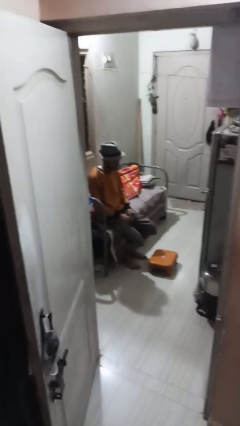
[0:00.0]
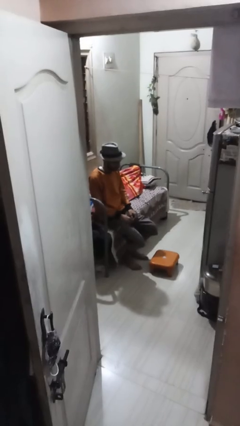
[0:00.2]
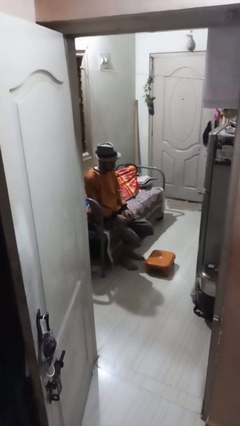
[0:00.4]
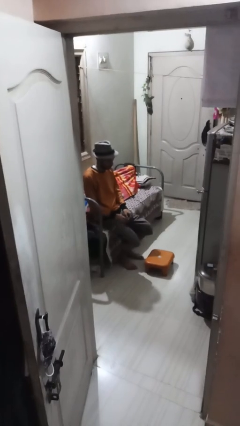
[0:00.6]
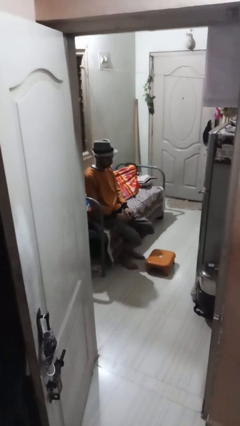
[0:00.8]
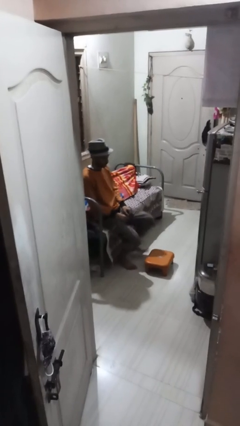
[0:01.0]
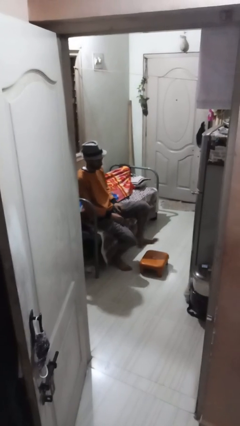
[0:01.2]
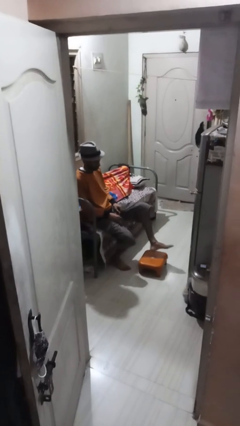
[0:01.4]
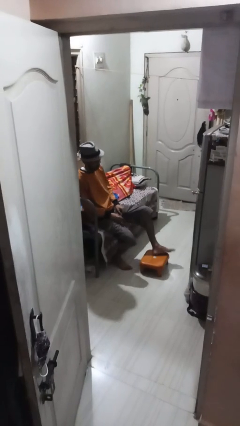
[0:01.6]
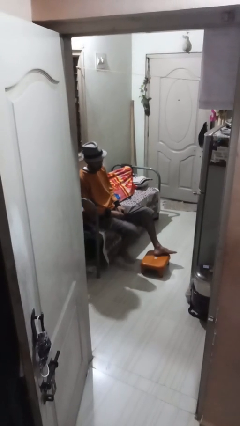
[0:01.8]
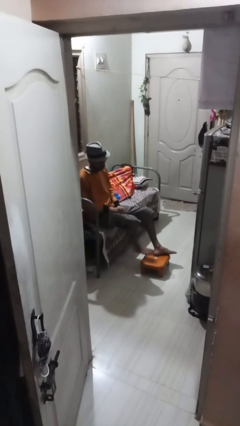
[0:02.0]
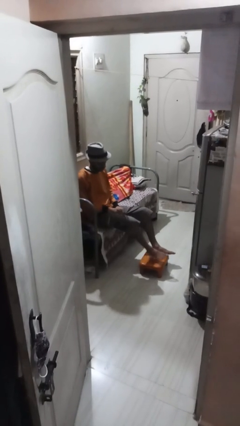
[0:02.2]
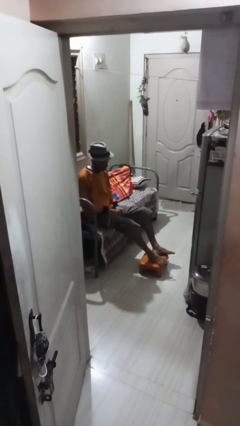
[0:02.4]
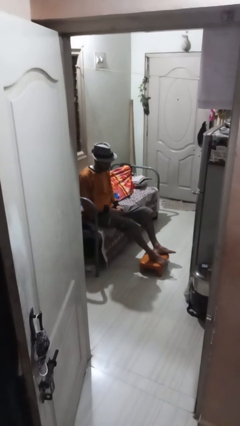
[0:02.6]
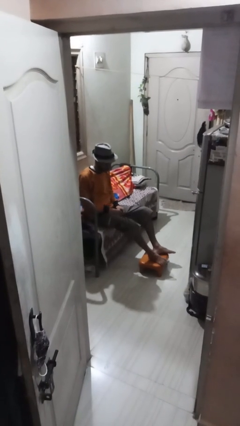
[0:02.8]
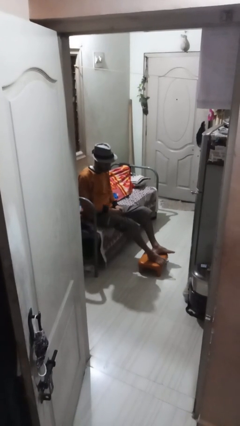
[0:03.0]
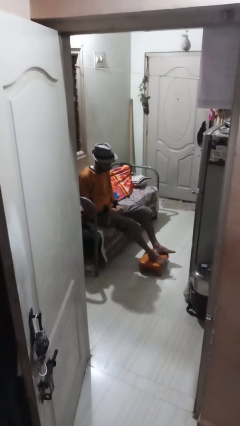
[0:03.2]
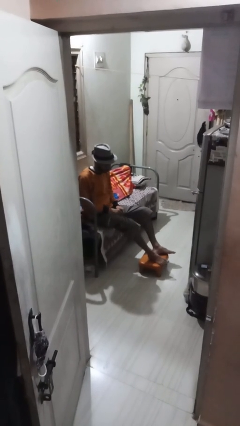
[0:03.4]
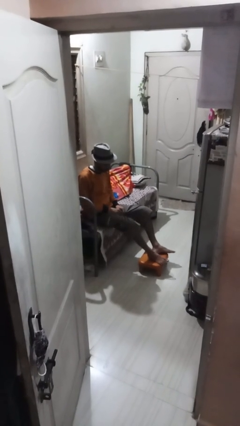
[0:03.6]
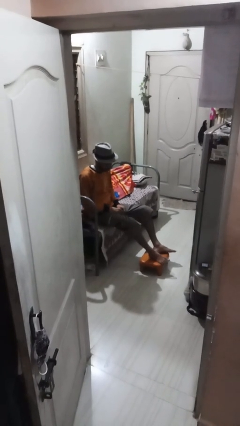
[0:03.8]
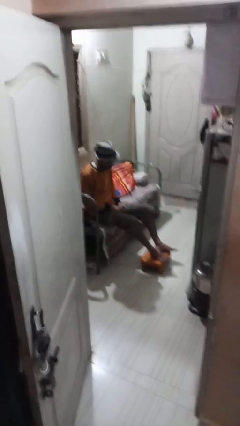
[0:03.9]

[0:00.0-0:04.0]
person puts feet up

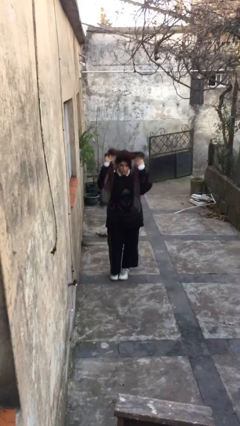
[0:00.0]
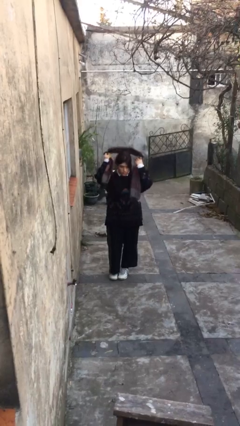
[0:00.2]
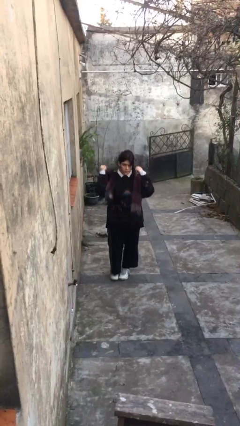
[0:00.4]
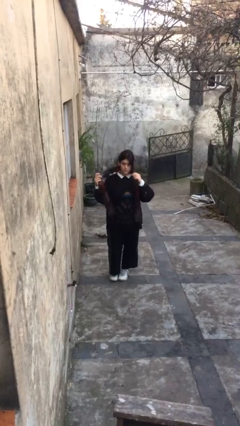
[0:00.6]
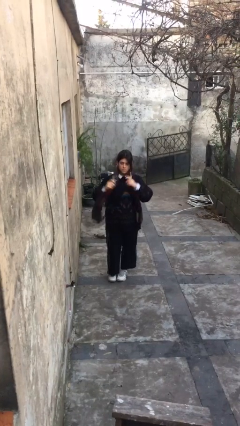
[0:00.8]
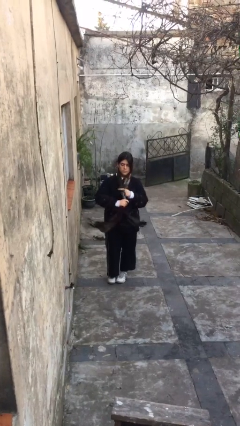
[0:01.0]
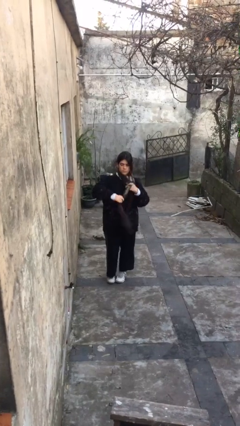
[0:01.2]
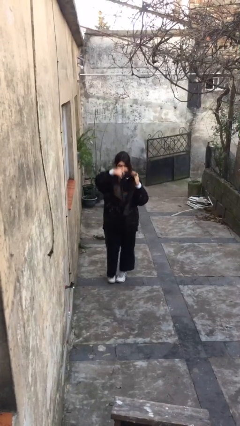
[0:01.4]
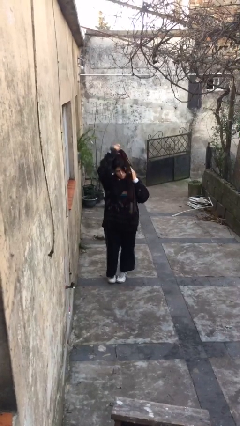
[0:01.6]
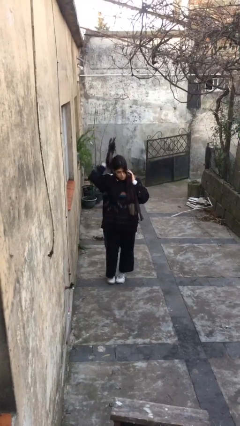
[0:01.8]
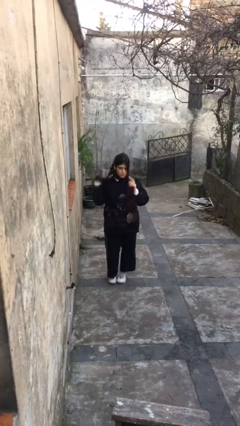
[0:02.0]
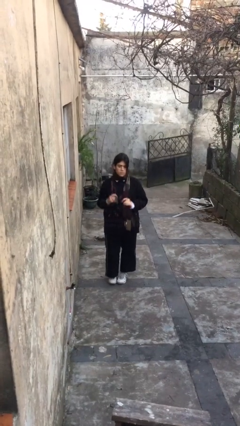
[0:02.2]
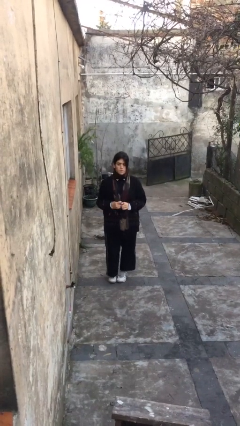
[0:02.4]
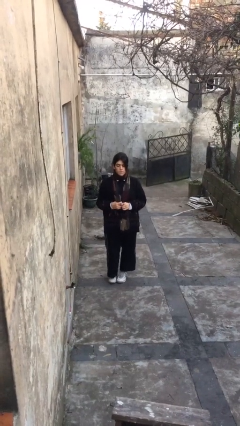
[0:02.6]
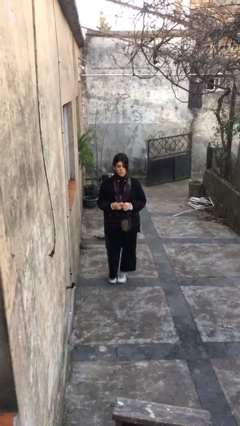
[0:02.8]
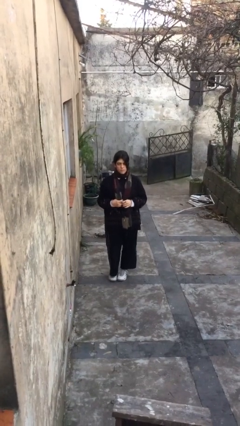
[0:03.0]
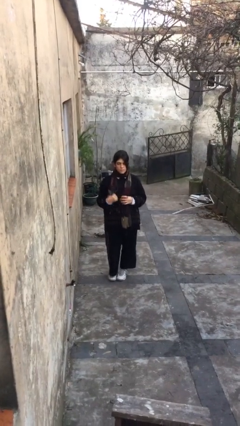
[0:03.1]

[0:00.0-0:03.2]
person puts on scarf

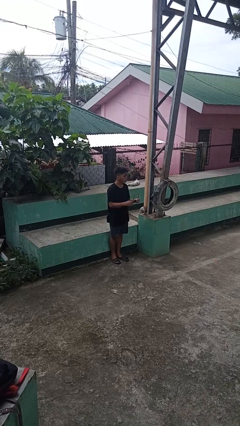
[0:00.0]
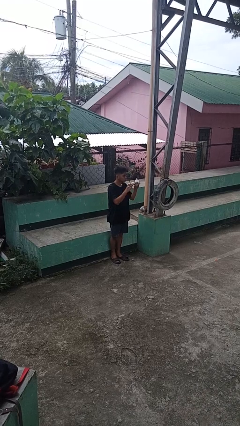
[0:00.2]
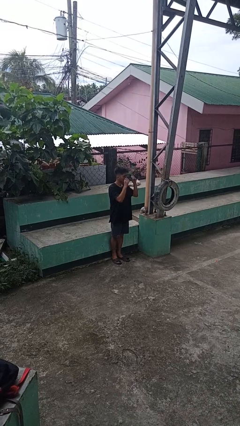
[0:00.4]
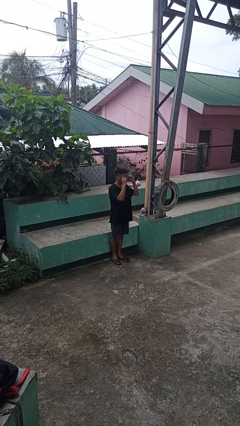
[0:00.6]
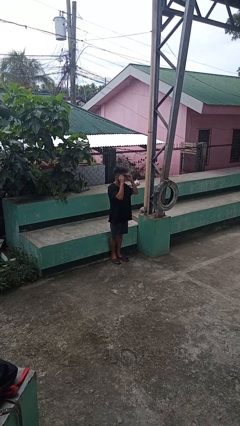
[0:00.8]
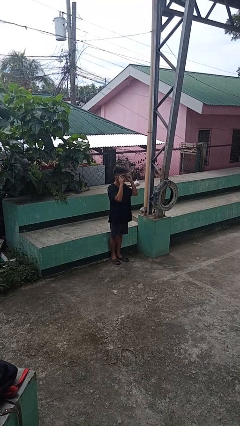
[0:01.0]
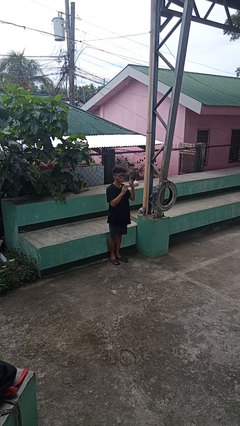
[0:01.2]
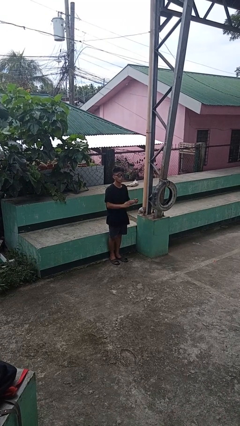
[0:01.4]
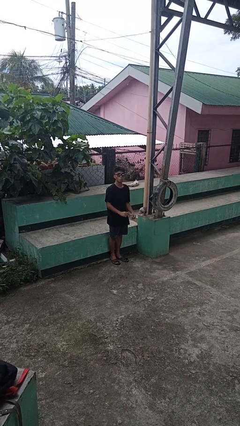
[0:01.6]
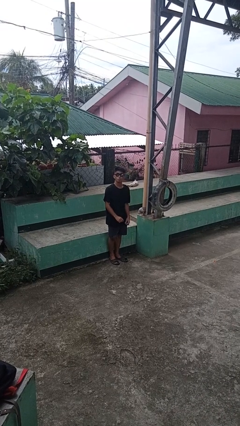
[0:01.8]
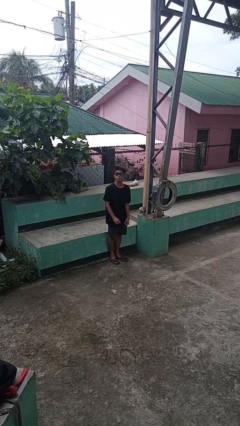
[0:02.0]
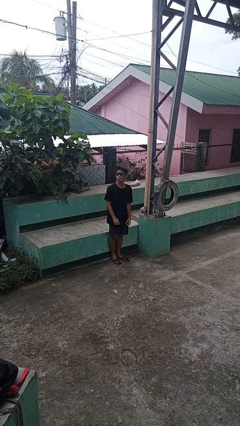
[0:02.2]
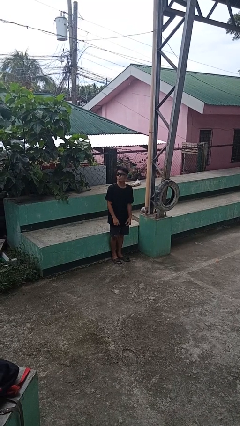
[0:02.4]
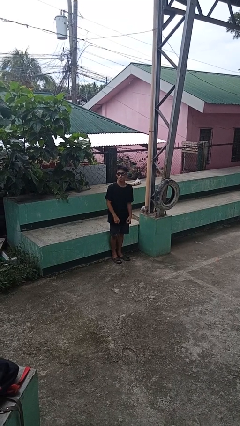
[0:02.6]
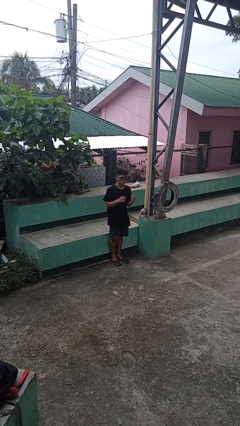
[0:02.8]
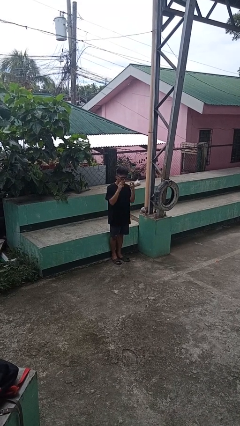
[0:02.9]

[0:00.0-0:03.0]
person puts on sunglasses

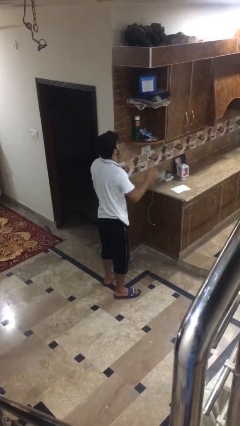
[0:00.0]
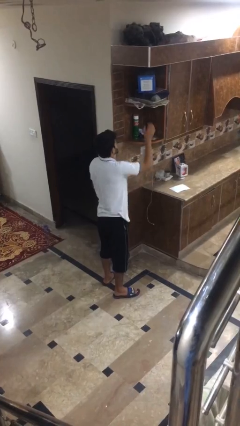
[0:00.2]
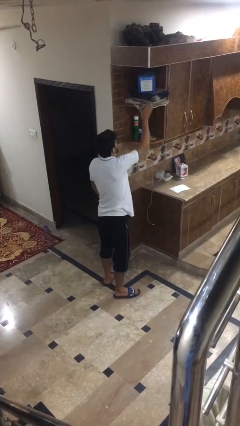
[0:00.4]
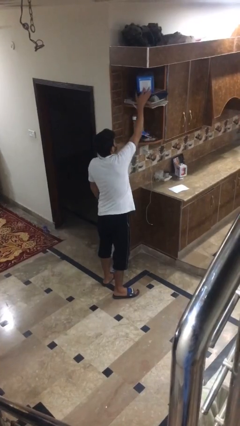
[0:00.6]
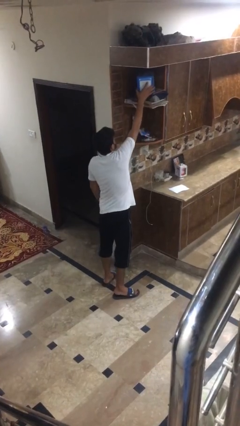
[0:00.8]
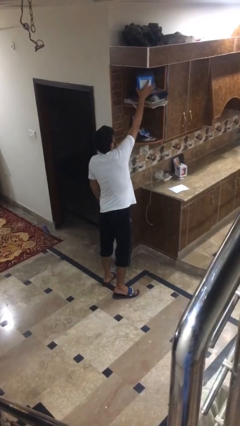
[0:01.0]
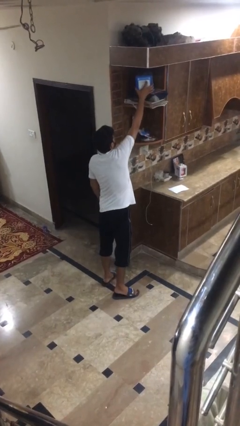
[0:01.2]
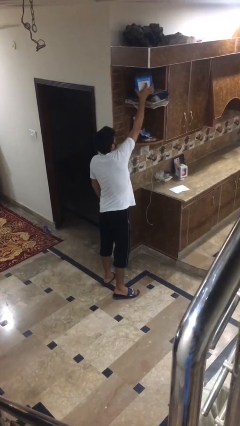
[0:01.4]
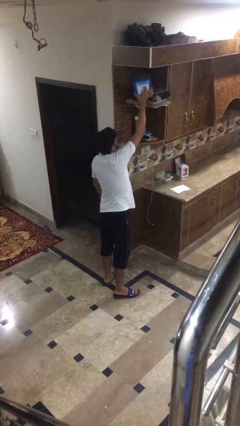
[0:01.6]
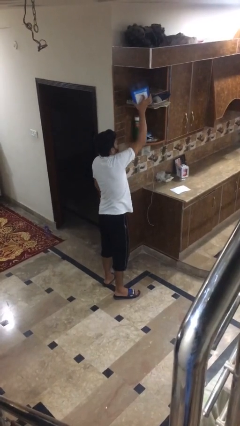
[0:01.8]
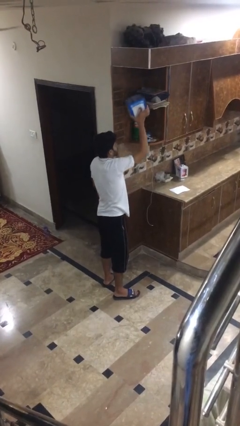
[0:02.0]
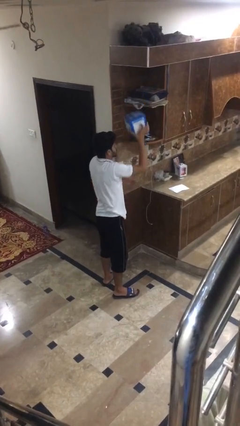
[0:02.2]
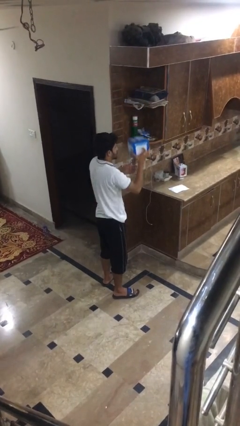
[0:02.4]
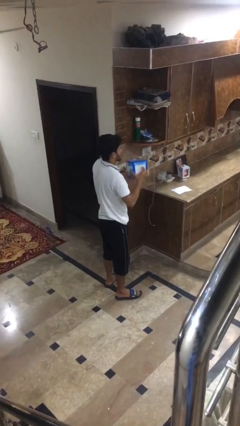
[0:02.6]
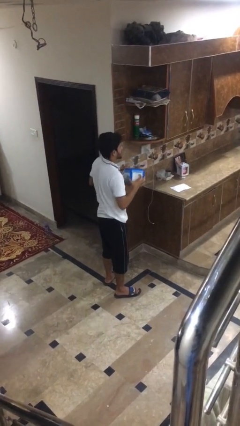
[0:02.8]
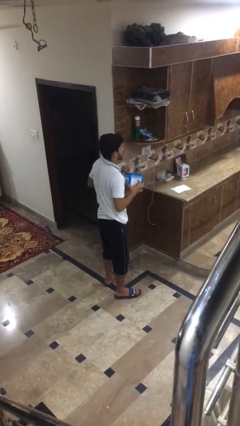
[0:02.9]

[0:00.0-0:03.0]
person puts down object on shelf

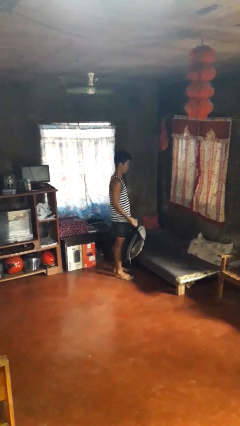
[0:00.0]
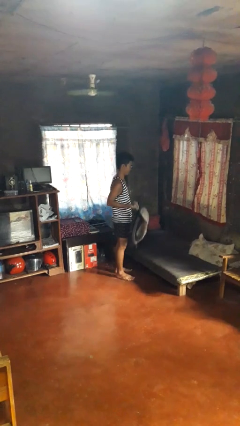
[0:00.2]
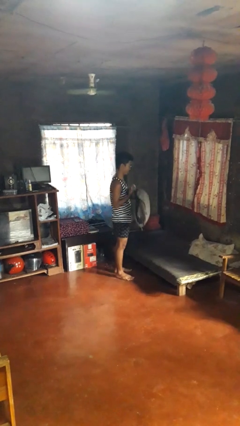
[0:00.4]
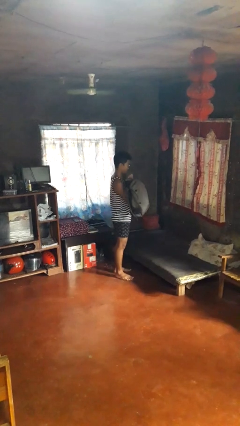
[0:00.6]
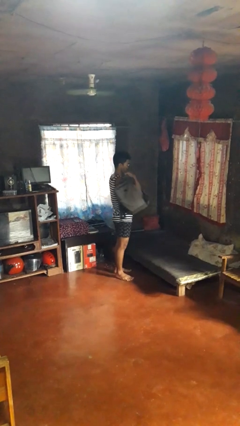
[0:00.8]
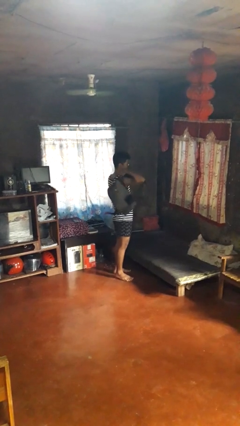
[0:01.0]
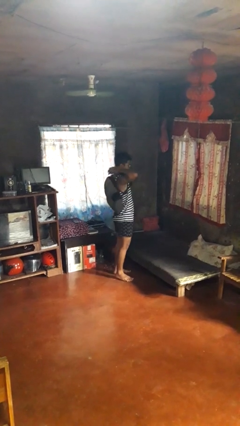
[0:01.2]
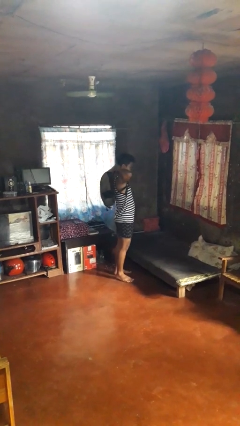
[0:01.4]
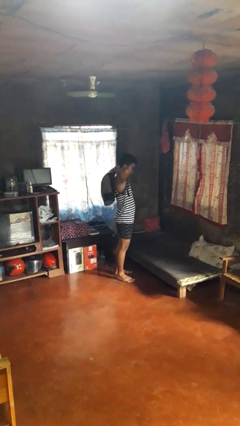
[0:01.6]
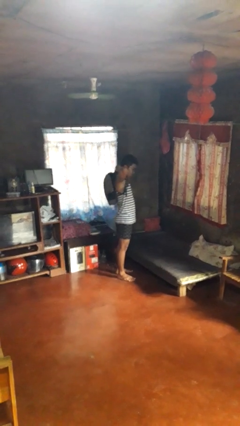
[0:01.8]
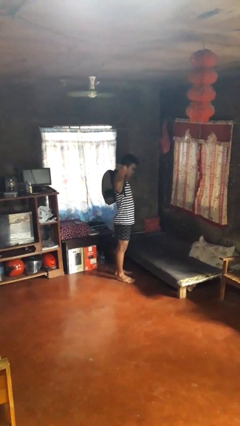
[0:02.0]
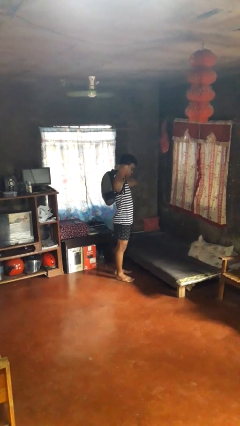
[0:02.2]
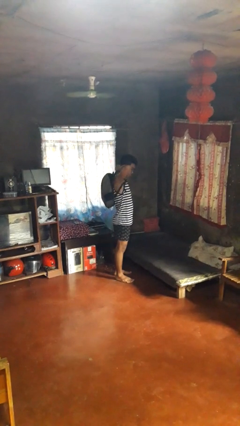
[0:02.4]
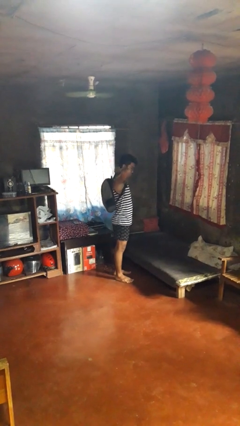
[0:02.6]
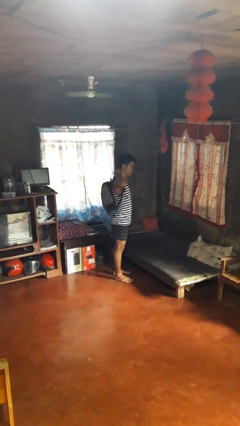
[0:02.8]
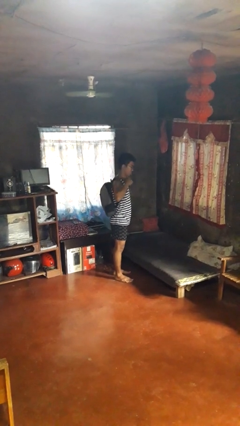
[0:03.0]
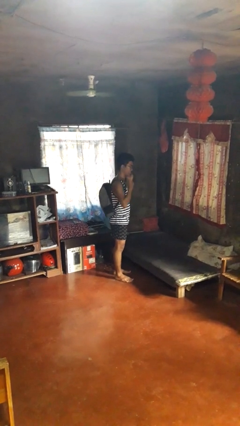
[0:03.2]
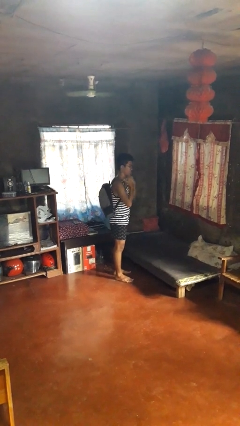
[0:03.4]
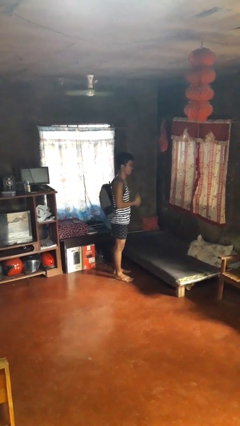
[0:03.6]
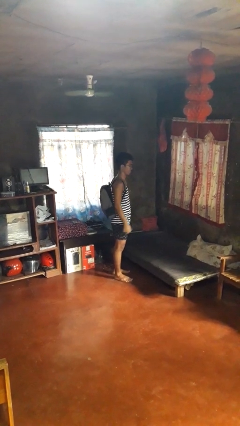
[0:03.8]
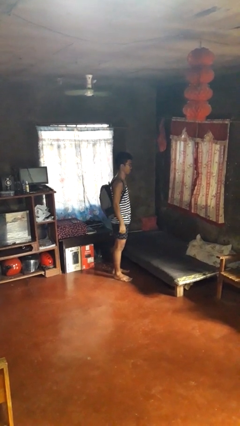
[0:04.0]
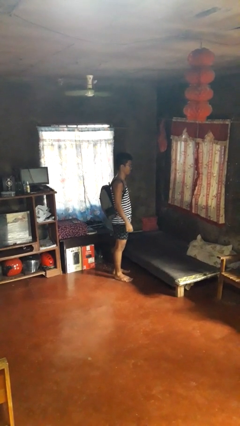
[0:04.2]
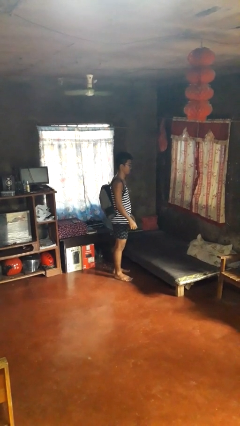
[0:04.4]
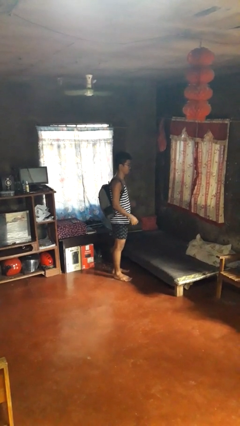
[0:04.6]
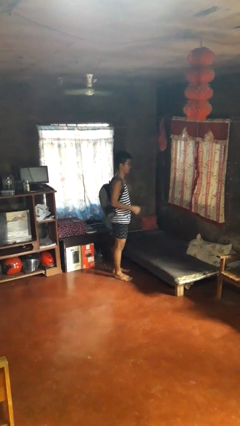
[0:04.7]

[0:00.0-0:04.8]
person puts on backpack
